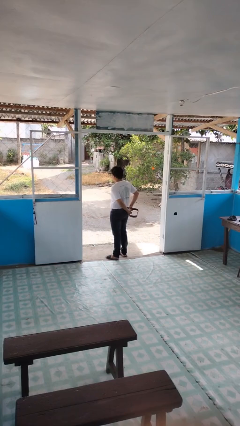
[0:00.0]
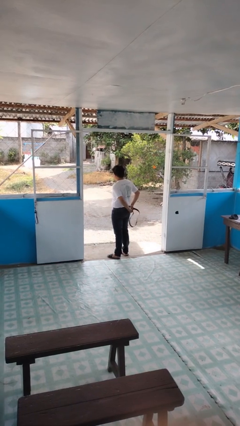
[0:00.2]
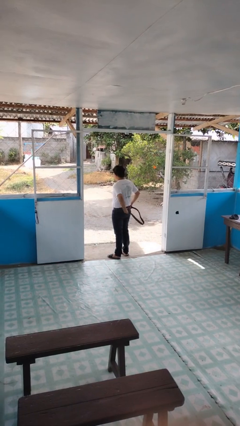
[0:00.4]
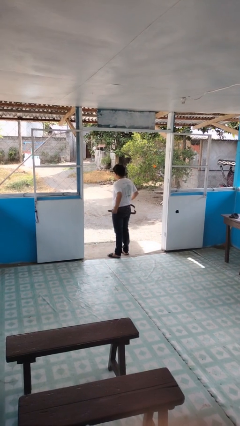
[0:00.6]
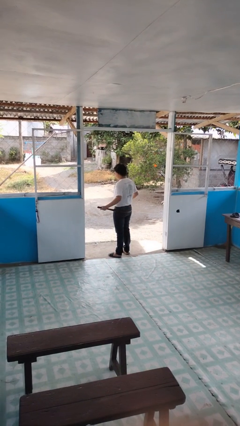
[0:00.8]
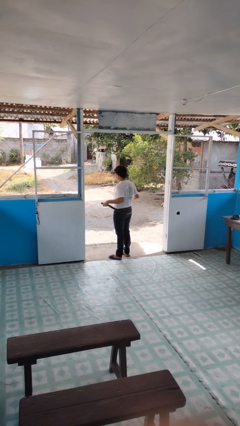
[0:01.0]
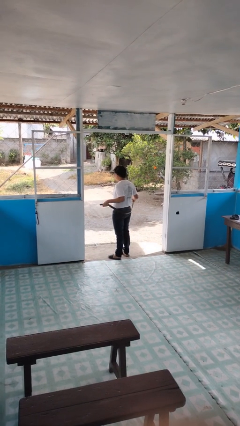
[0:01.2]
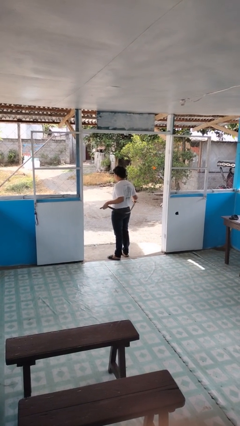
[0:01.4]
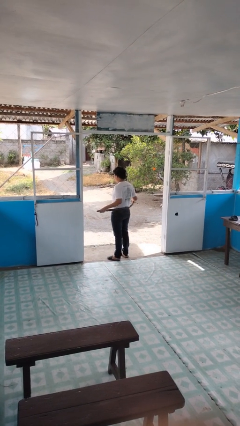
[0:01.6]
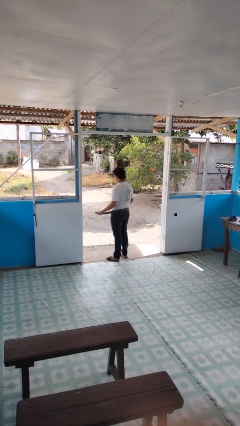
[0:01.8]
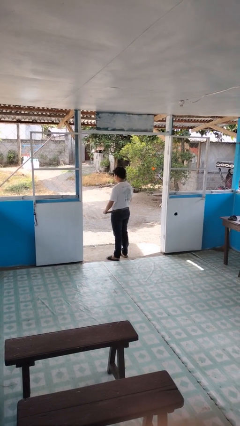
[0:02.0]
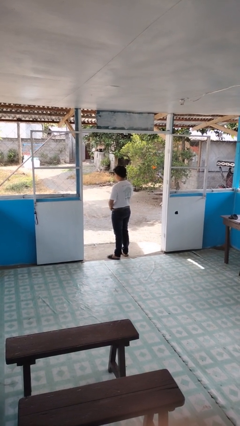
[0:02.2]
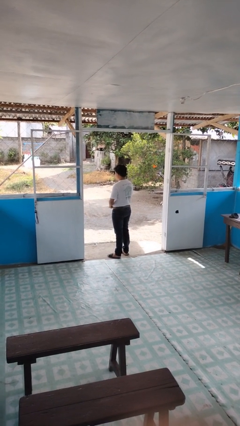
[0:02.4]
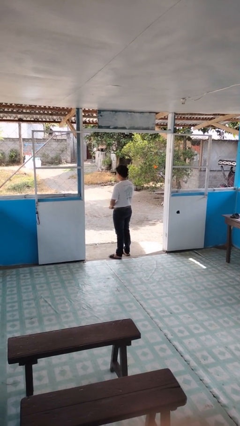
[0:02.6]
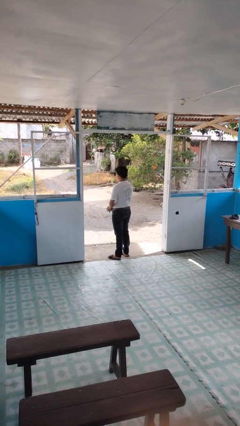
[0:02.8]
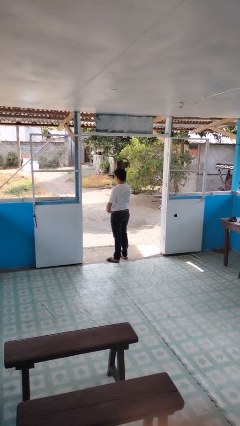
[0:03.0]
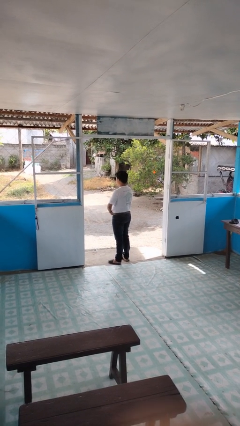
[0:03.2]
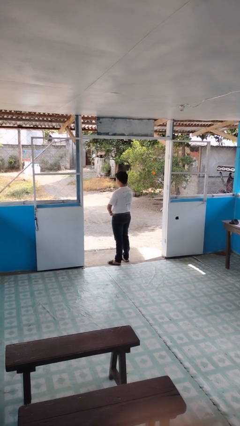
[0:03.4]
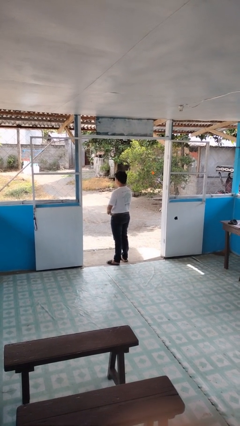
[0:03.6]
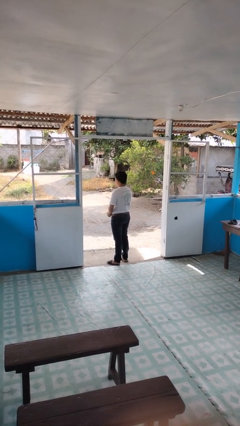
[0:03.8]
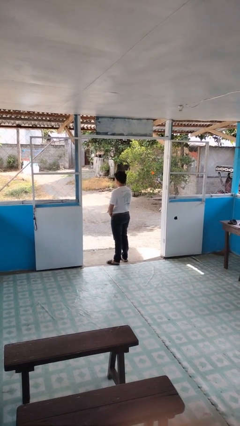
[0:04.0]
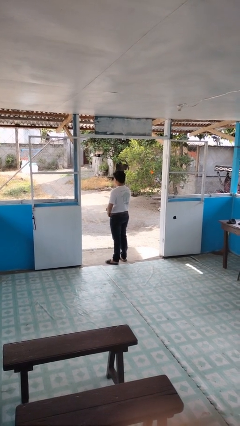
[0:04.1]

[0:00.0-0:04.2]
person puts on belt

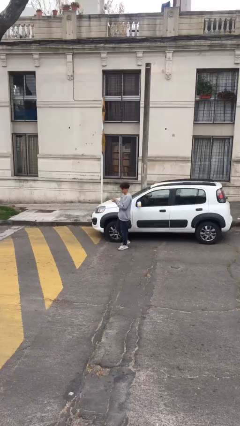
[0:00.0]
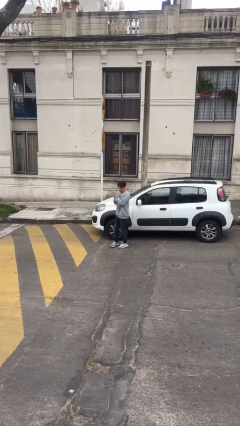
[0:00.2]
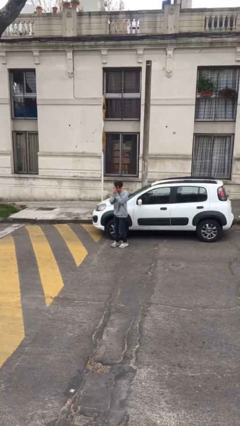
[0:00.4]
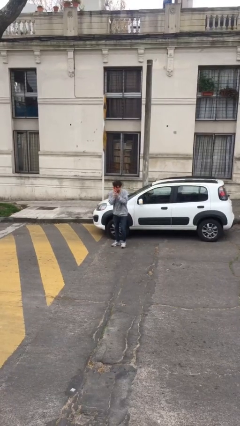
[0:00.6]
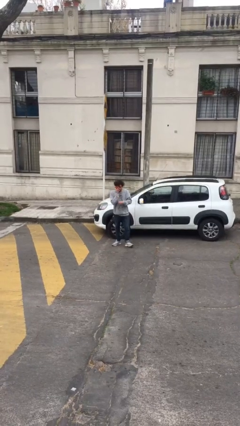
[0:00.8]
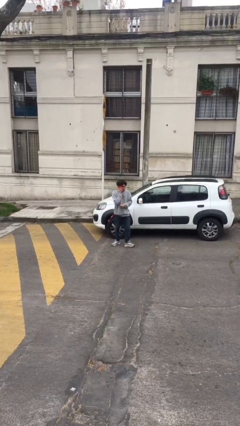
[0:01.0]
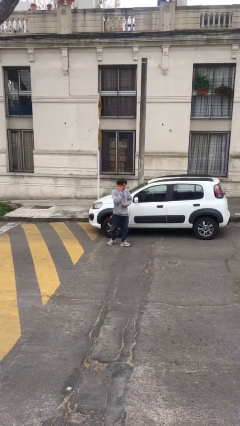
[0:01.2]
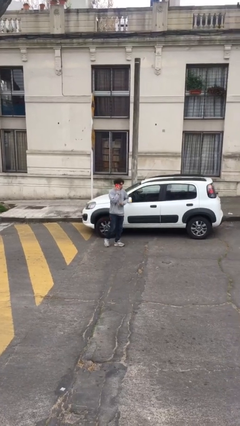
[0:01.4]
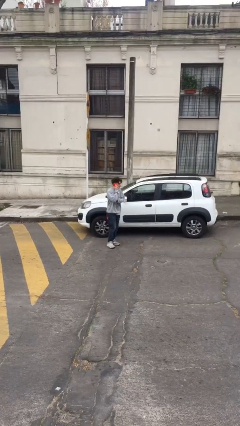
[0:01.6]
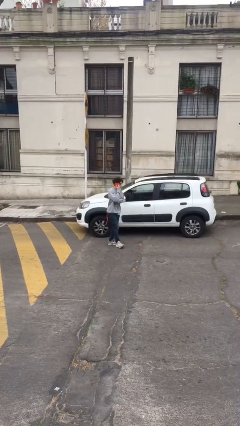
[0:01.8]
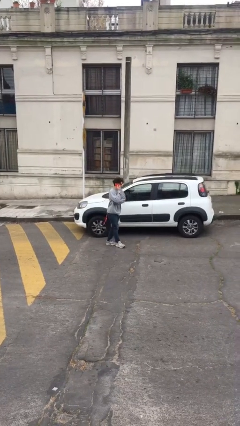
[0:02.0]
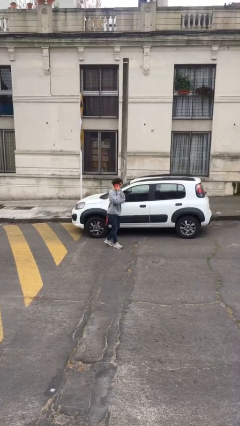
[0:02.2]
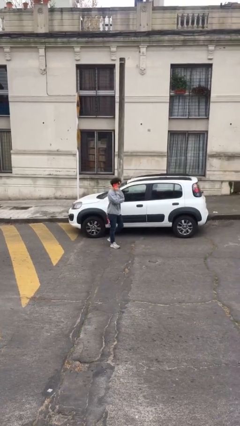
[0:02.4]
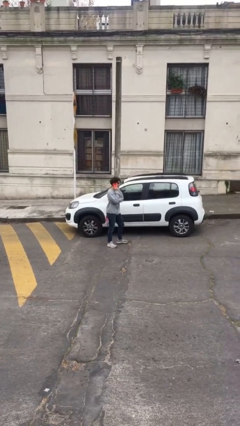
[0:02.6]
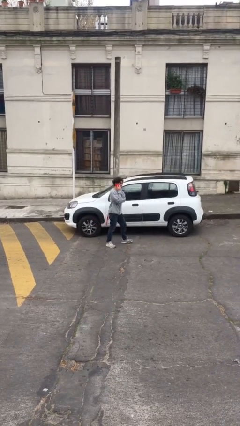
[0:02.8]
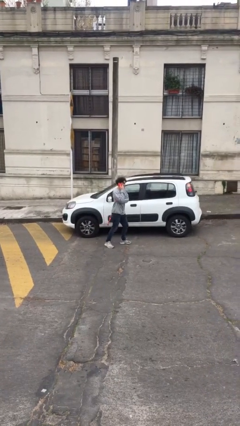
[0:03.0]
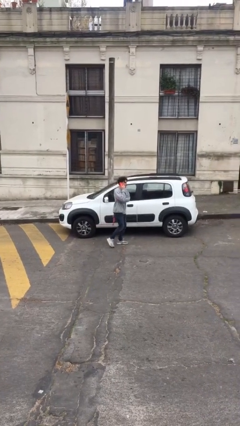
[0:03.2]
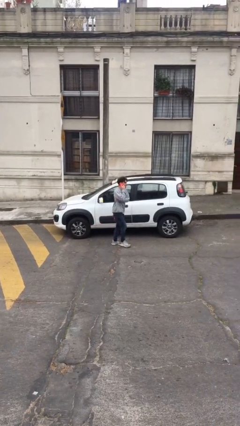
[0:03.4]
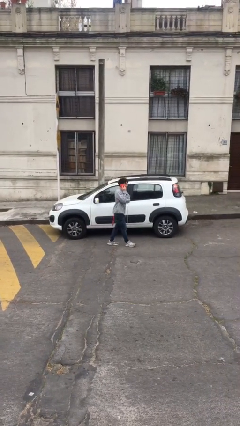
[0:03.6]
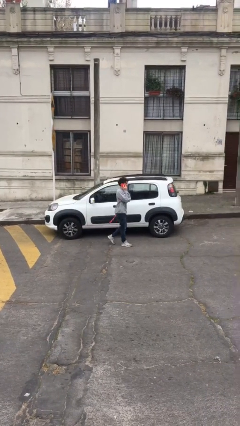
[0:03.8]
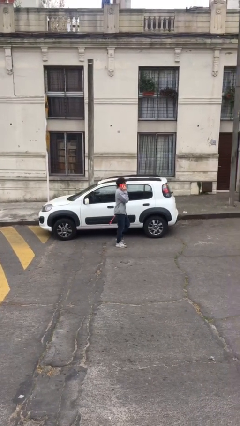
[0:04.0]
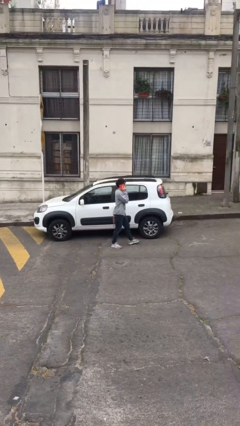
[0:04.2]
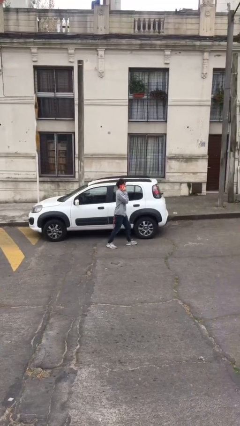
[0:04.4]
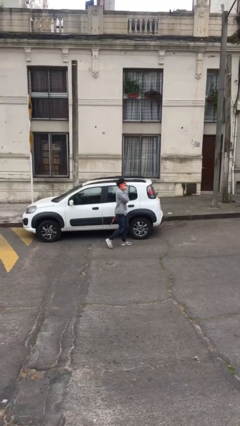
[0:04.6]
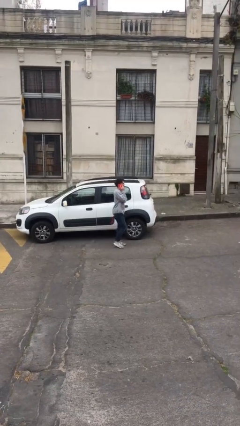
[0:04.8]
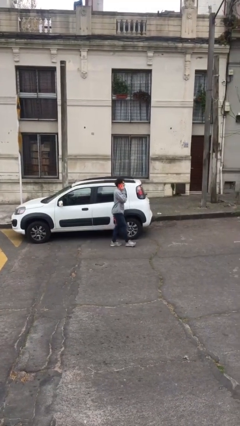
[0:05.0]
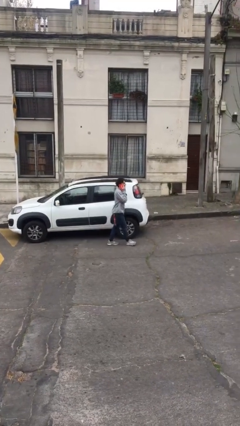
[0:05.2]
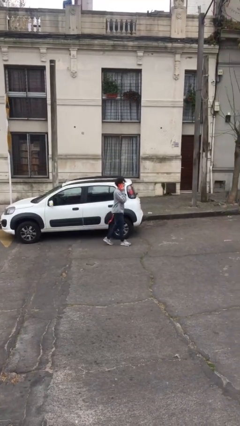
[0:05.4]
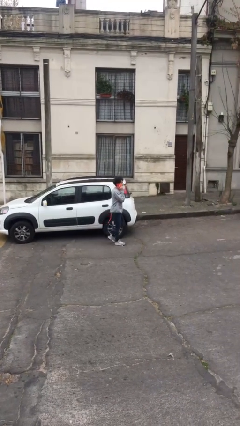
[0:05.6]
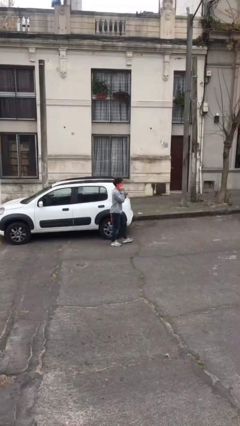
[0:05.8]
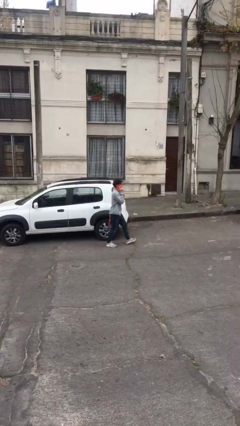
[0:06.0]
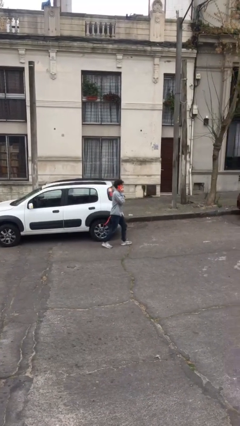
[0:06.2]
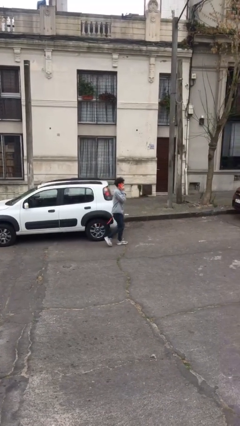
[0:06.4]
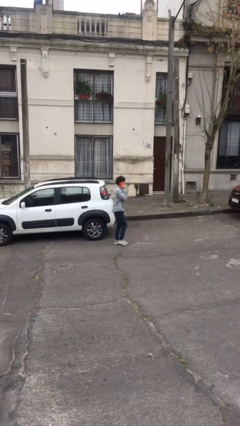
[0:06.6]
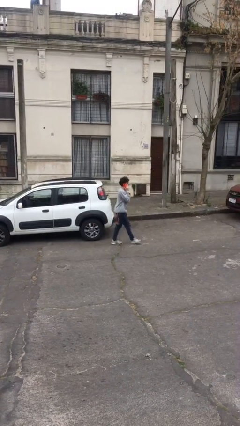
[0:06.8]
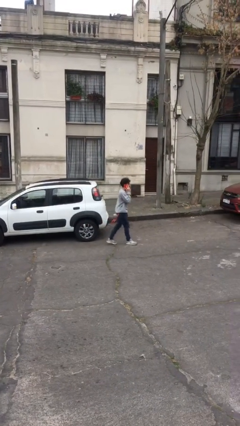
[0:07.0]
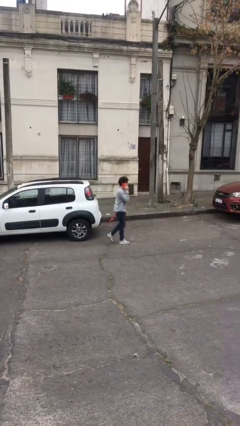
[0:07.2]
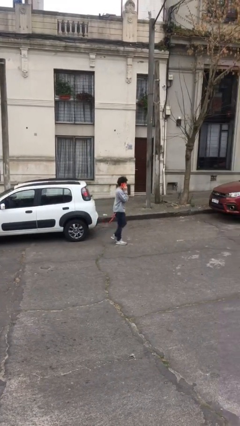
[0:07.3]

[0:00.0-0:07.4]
person talks on phone

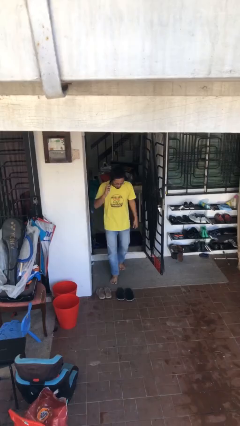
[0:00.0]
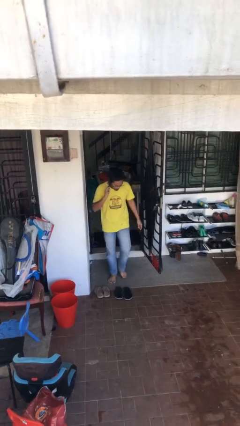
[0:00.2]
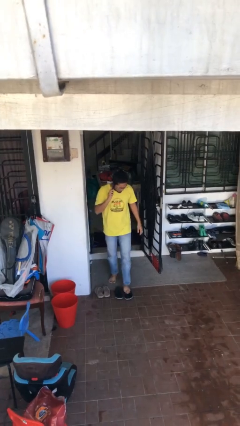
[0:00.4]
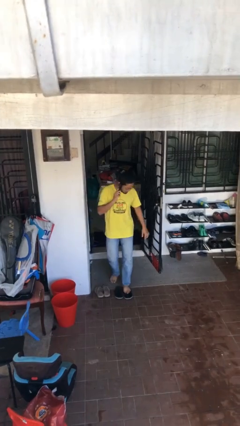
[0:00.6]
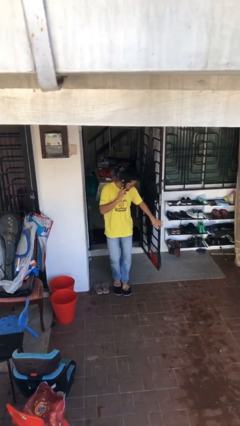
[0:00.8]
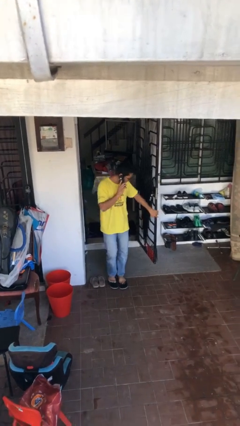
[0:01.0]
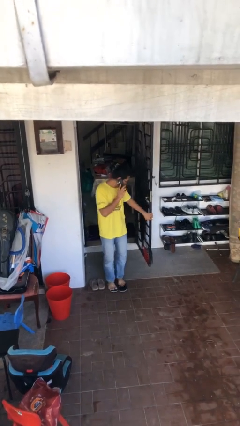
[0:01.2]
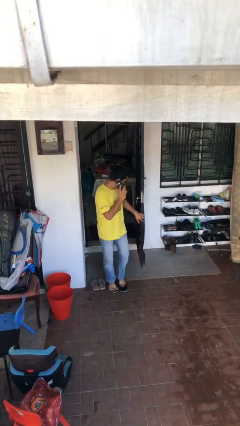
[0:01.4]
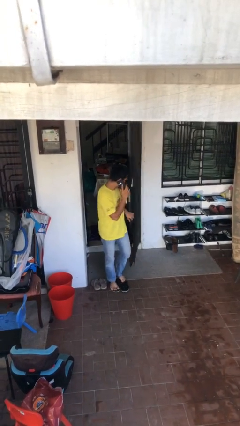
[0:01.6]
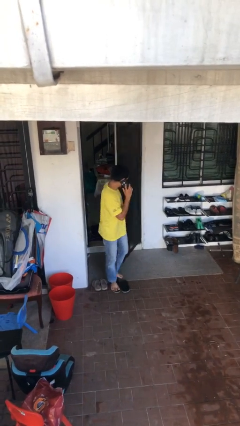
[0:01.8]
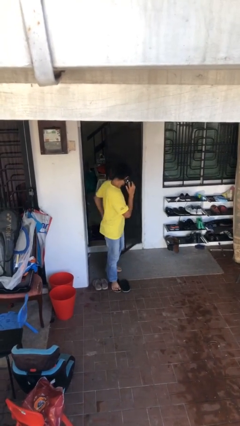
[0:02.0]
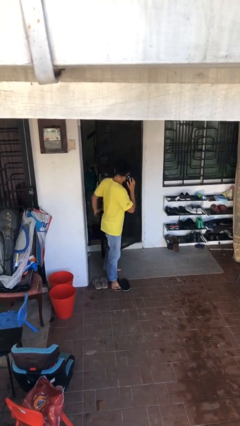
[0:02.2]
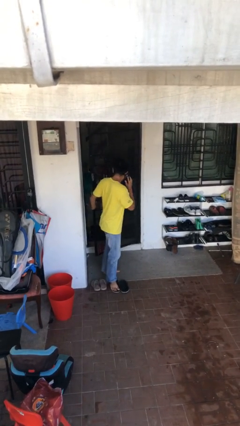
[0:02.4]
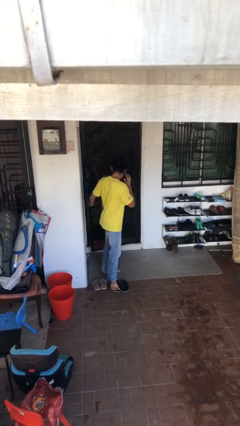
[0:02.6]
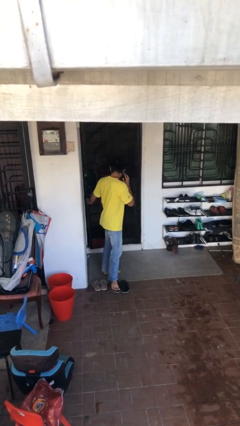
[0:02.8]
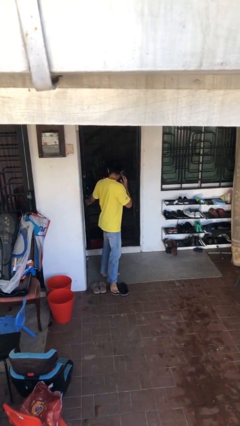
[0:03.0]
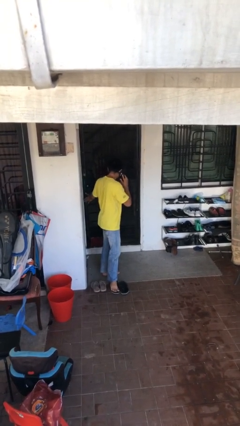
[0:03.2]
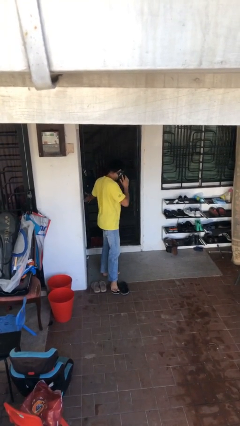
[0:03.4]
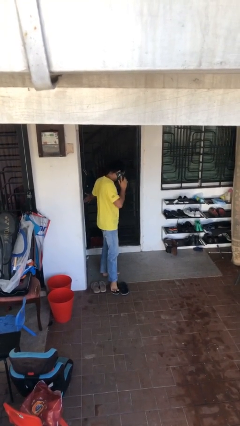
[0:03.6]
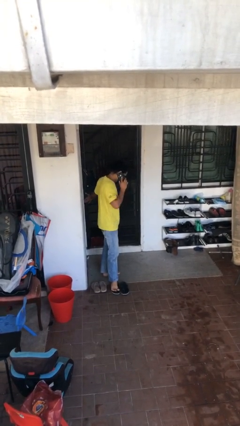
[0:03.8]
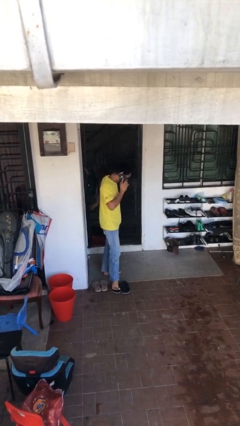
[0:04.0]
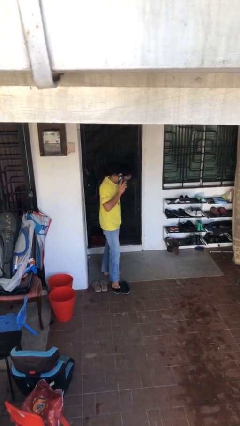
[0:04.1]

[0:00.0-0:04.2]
person closes facility door

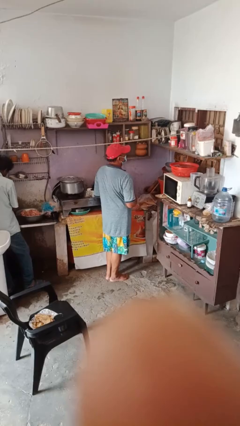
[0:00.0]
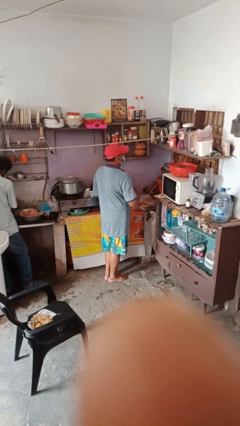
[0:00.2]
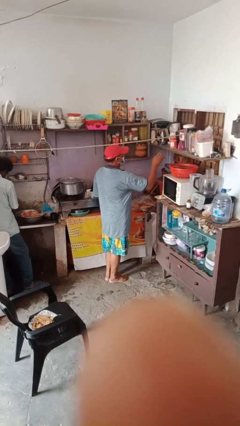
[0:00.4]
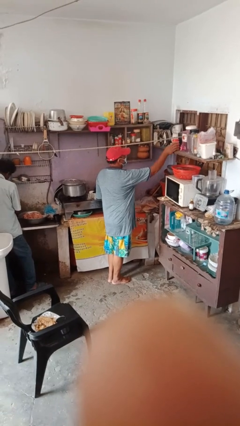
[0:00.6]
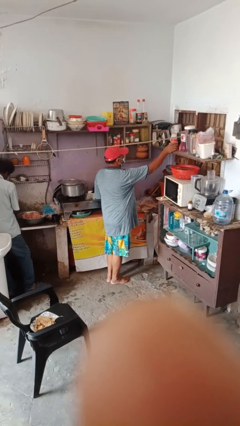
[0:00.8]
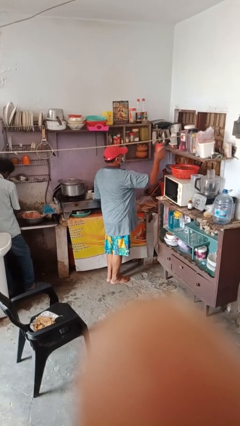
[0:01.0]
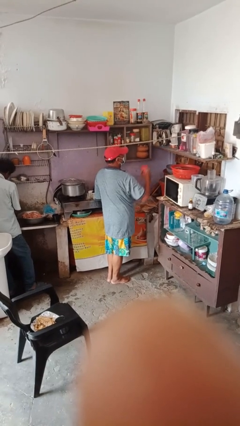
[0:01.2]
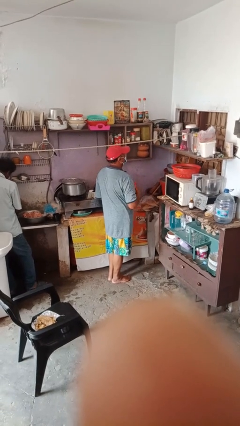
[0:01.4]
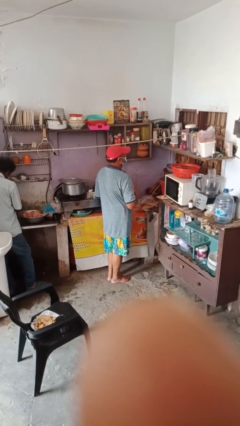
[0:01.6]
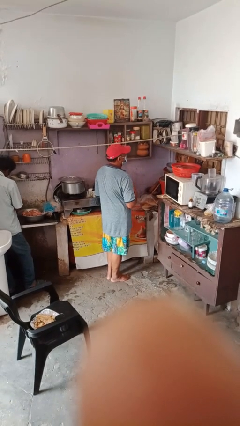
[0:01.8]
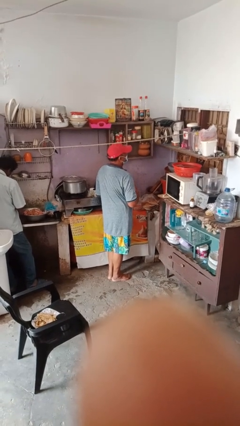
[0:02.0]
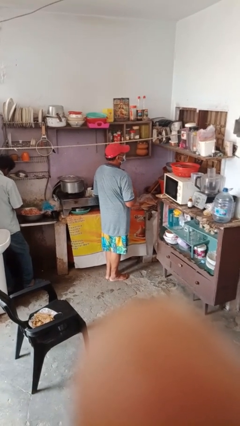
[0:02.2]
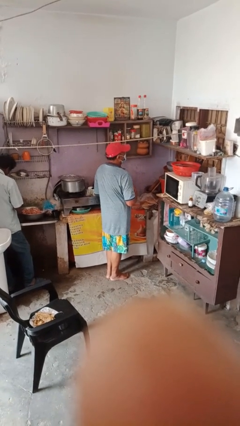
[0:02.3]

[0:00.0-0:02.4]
person picks up object from shelf
